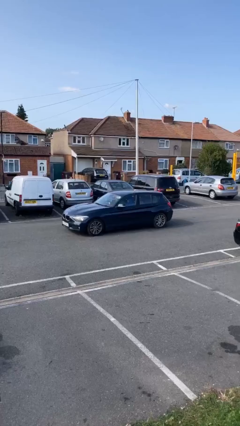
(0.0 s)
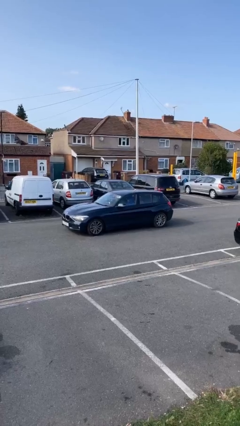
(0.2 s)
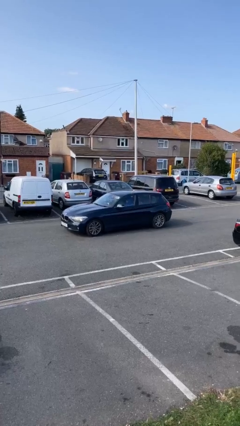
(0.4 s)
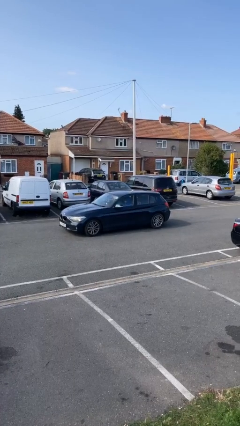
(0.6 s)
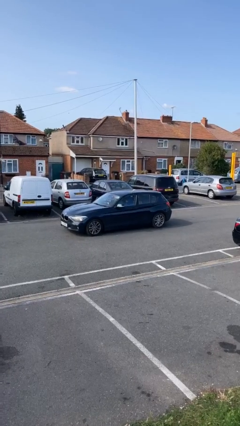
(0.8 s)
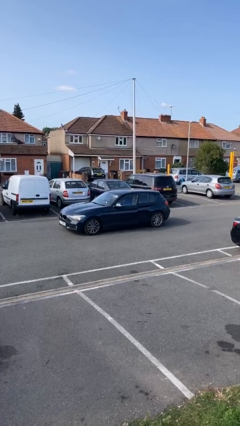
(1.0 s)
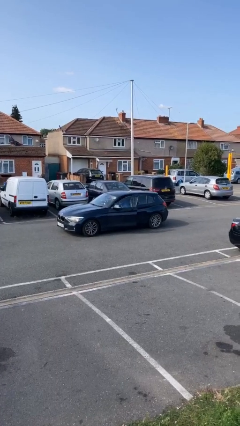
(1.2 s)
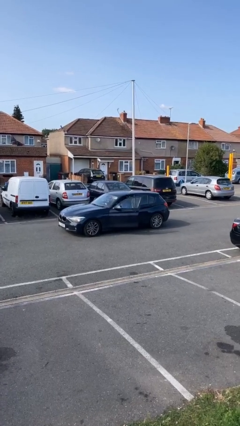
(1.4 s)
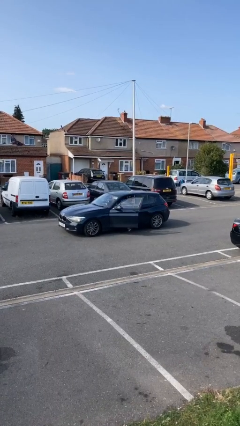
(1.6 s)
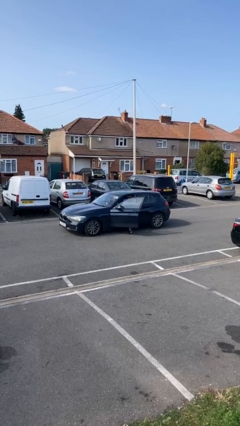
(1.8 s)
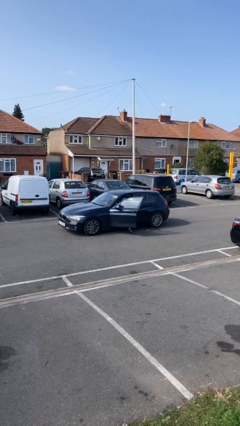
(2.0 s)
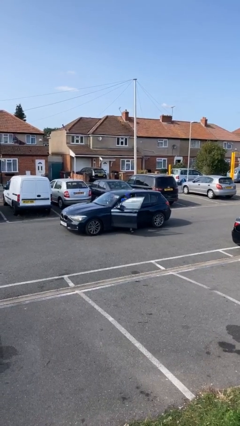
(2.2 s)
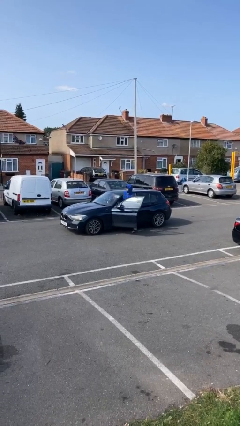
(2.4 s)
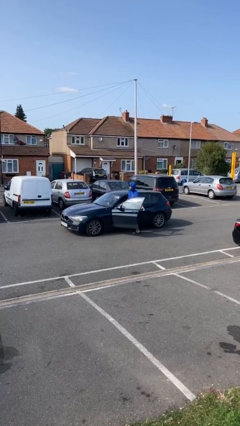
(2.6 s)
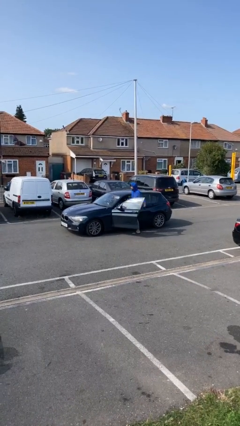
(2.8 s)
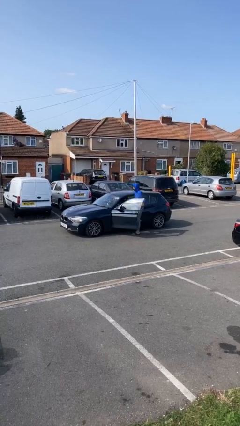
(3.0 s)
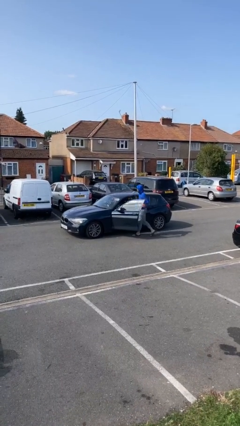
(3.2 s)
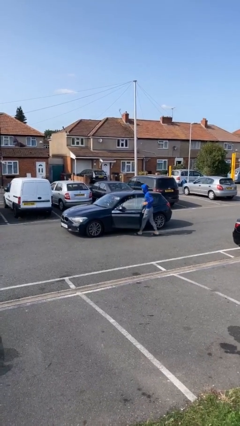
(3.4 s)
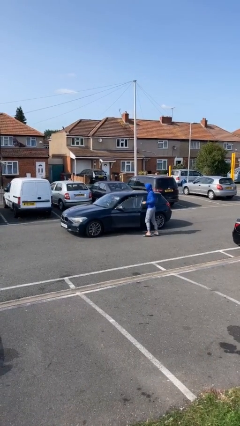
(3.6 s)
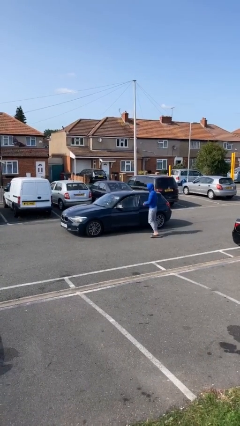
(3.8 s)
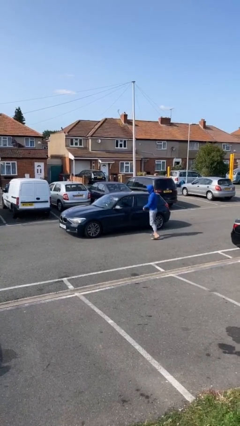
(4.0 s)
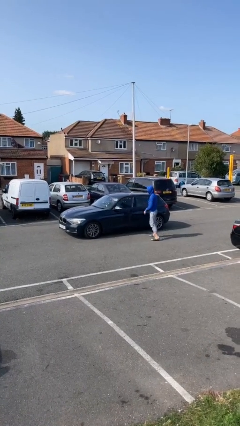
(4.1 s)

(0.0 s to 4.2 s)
car drops off person

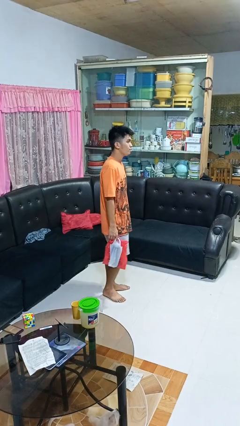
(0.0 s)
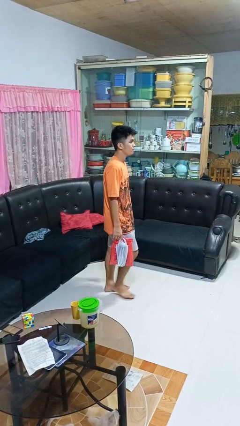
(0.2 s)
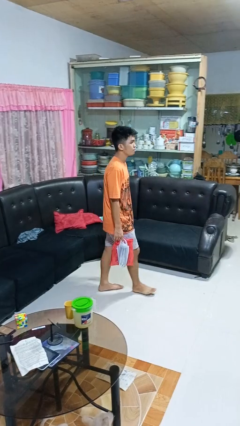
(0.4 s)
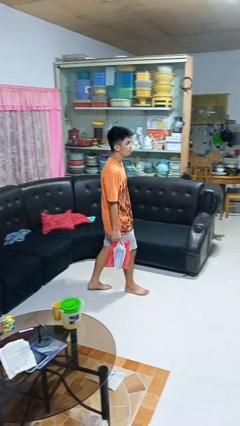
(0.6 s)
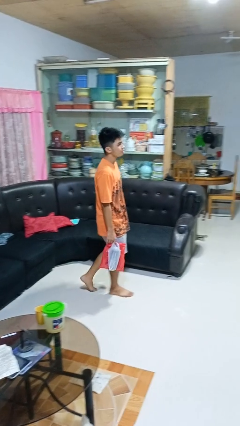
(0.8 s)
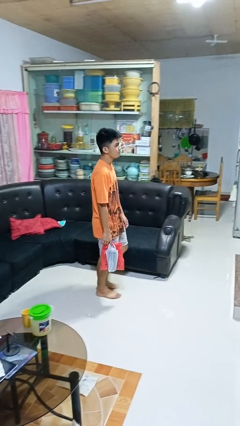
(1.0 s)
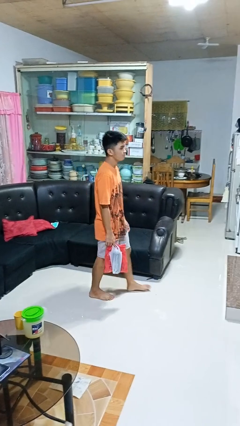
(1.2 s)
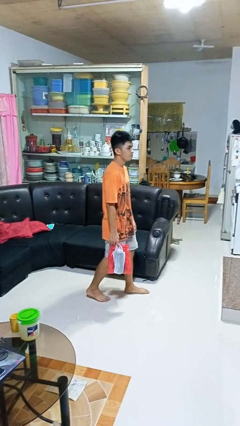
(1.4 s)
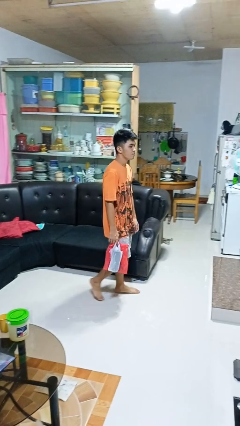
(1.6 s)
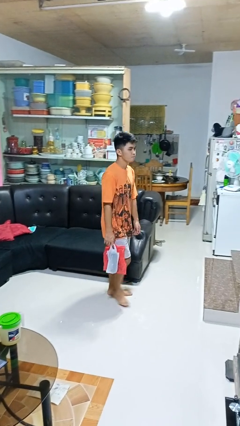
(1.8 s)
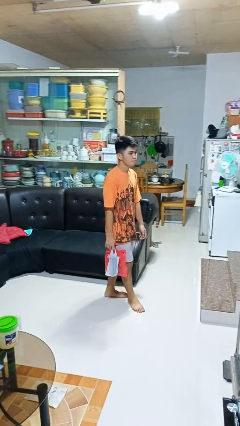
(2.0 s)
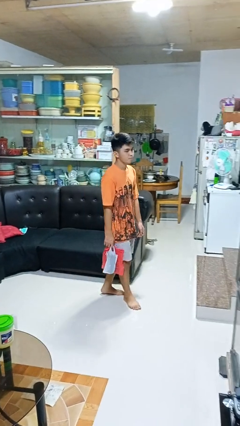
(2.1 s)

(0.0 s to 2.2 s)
person carries groceries

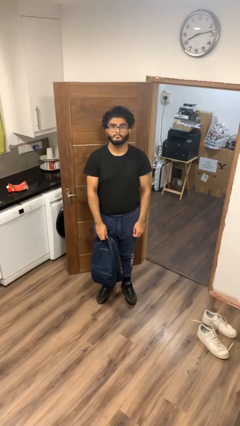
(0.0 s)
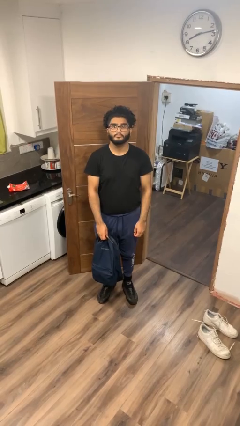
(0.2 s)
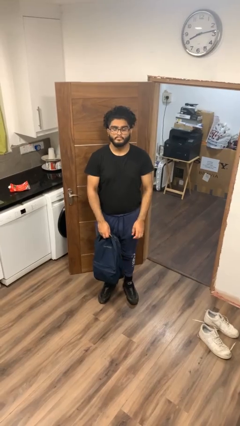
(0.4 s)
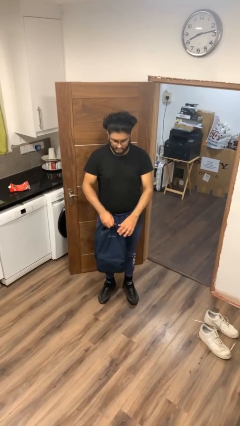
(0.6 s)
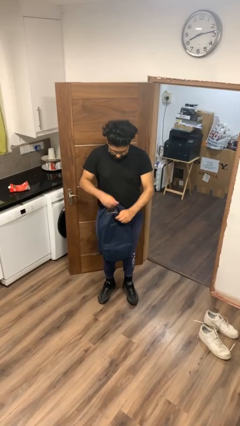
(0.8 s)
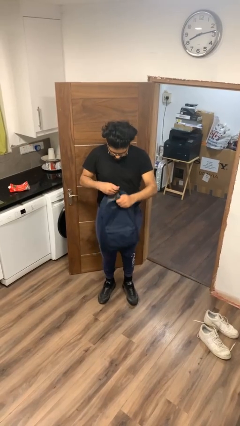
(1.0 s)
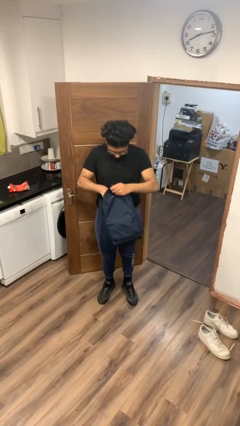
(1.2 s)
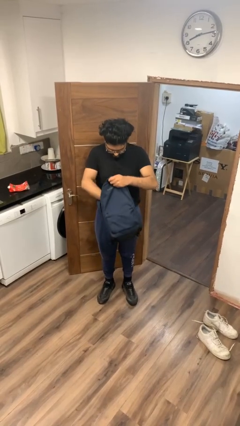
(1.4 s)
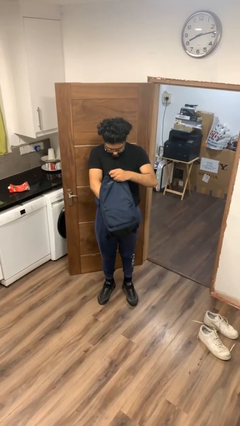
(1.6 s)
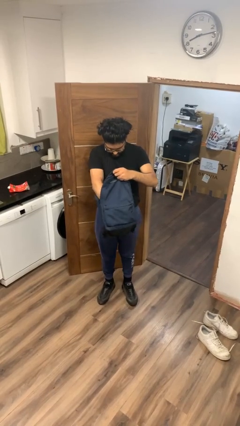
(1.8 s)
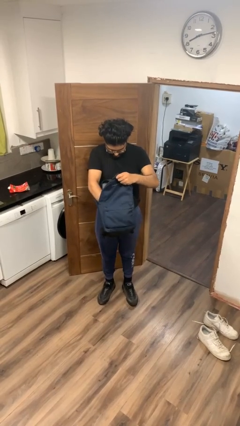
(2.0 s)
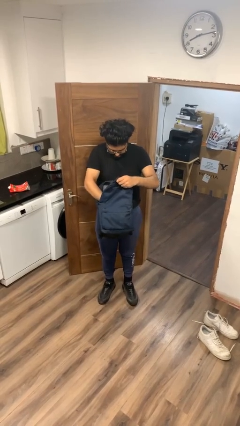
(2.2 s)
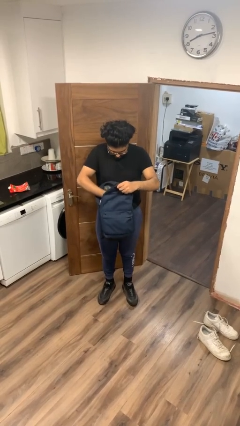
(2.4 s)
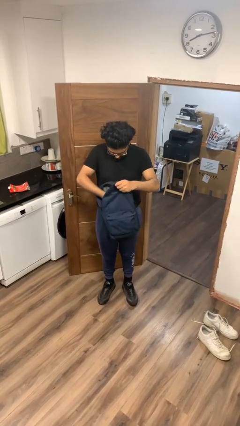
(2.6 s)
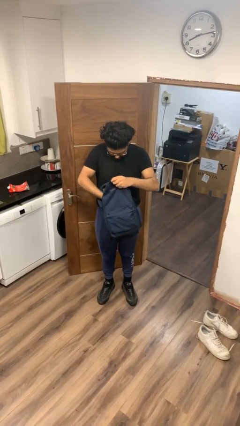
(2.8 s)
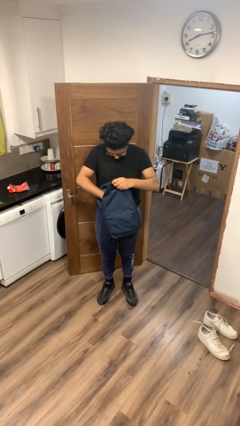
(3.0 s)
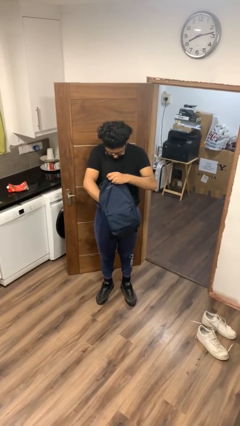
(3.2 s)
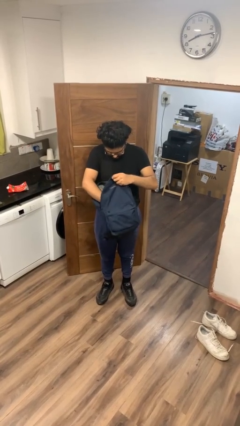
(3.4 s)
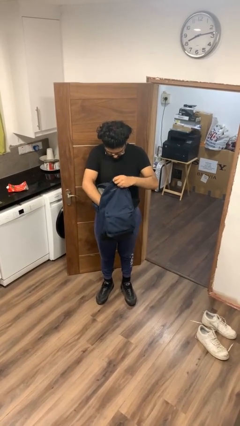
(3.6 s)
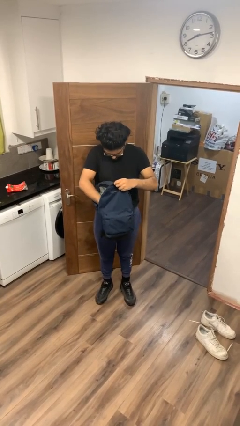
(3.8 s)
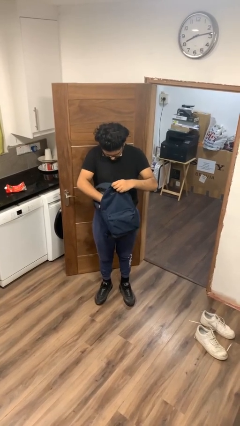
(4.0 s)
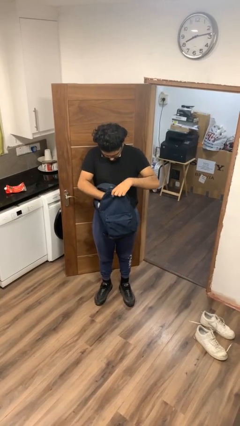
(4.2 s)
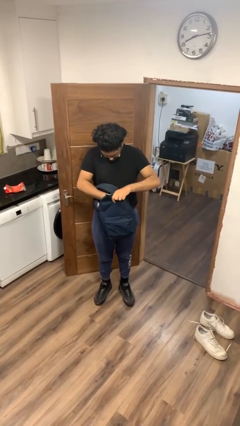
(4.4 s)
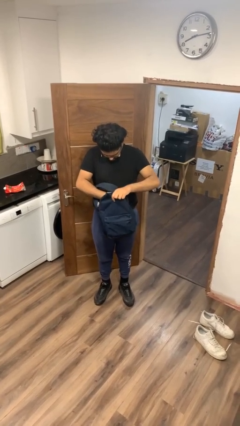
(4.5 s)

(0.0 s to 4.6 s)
person searches in backpack

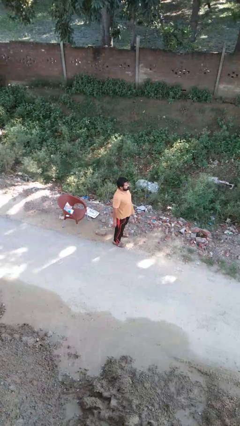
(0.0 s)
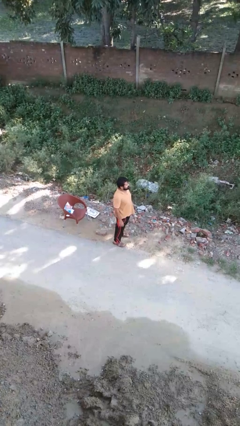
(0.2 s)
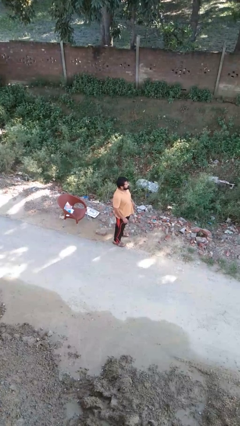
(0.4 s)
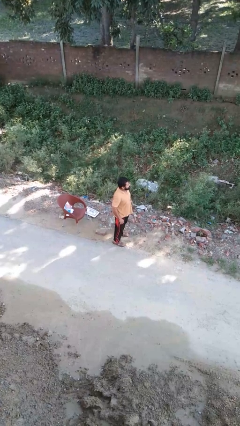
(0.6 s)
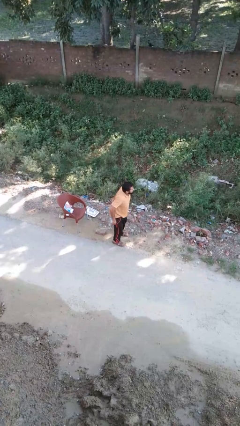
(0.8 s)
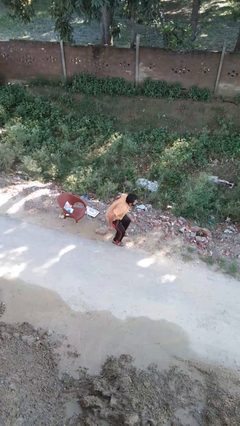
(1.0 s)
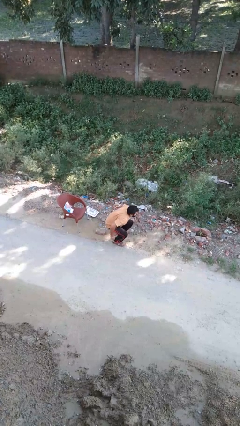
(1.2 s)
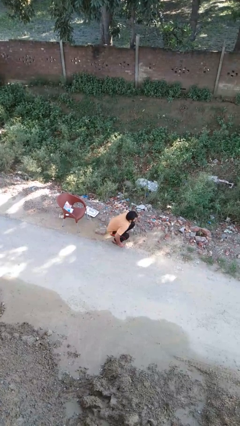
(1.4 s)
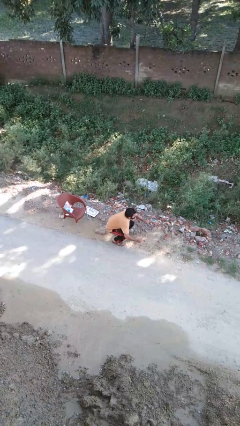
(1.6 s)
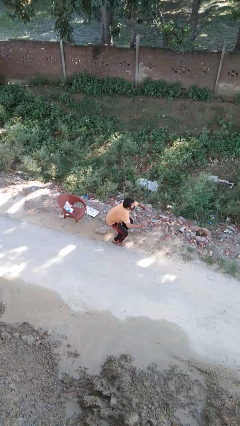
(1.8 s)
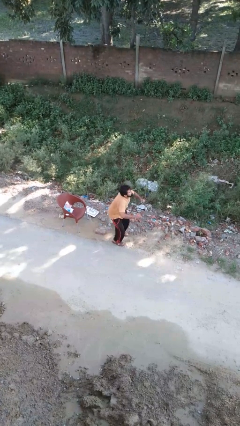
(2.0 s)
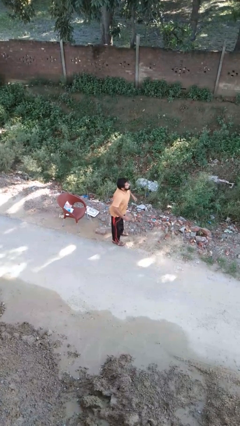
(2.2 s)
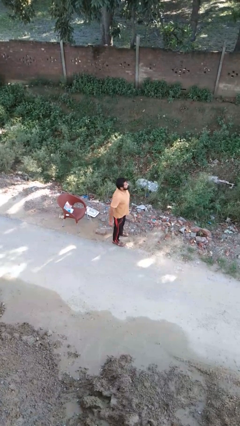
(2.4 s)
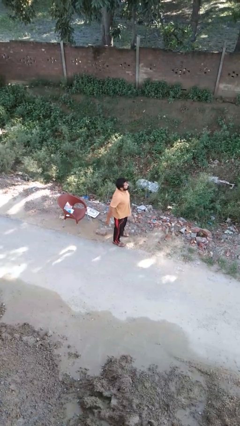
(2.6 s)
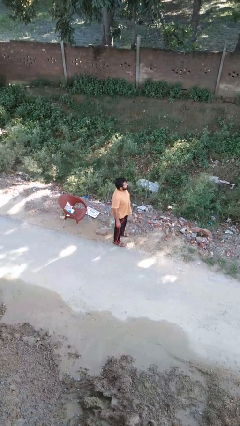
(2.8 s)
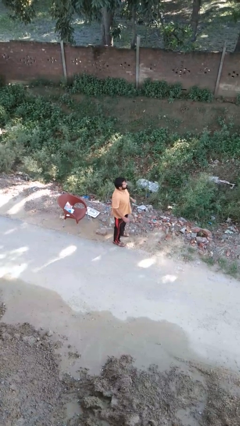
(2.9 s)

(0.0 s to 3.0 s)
person exercises with situp

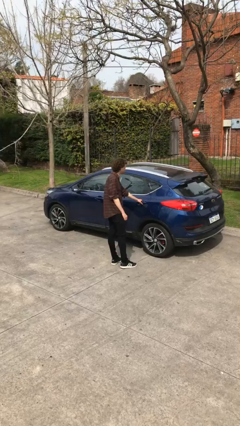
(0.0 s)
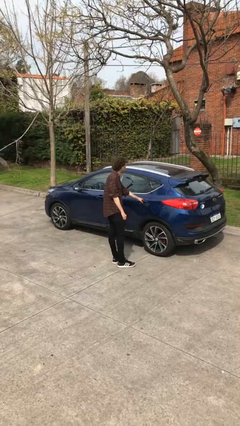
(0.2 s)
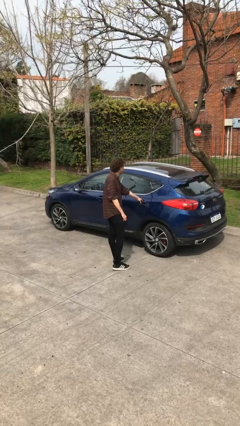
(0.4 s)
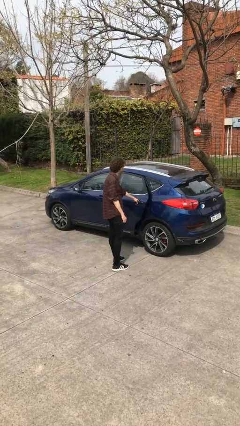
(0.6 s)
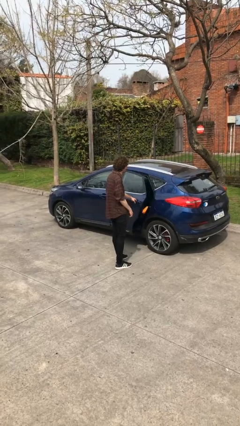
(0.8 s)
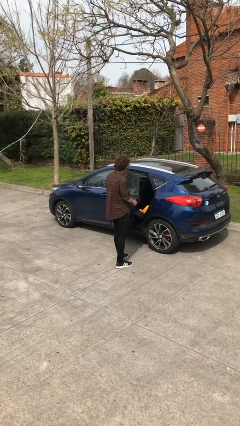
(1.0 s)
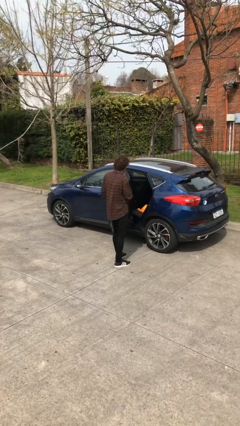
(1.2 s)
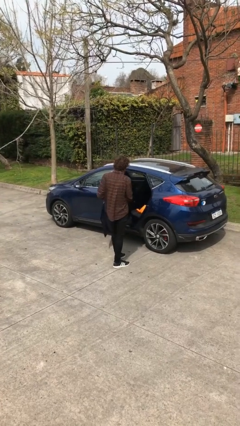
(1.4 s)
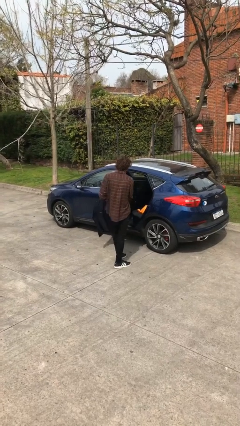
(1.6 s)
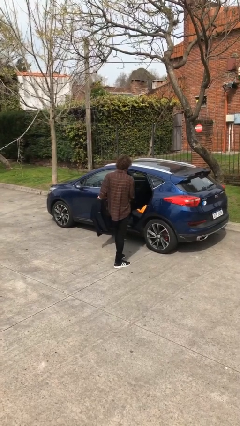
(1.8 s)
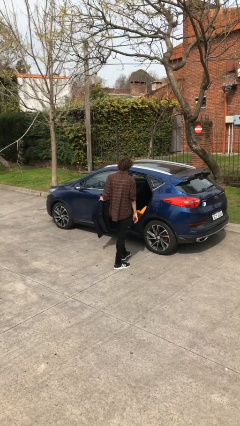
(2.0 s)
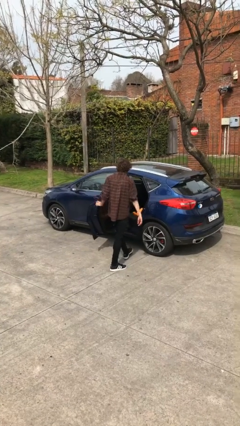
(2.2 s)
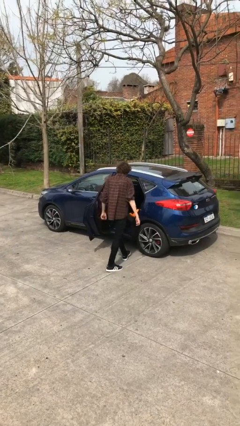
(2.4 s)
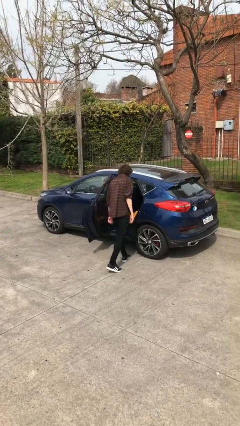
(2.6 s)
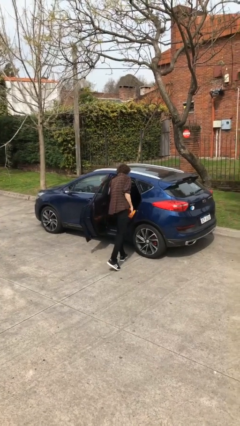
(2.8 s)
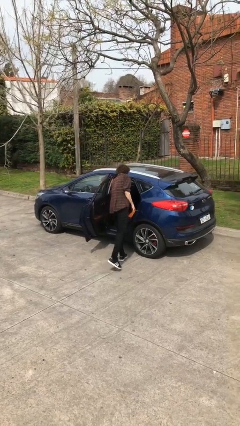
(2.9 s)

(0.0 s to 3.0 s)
person opens car door

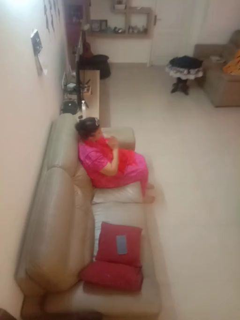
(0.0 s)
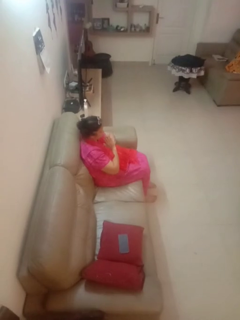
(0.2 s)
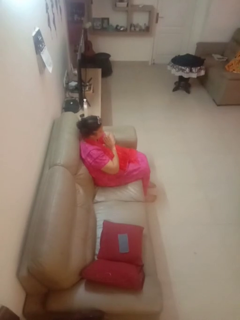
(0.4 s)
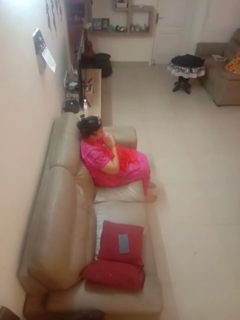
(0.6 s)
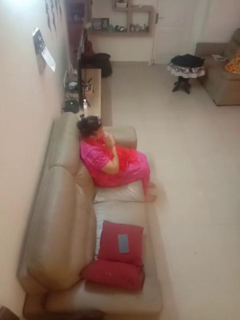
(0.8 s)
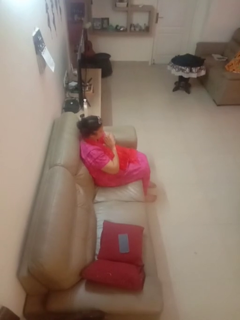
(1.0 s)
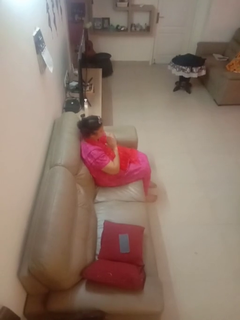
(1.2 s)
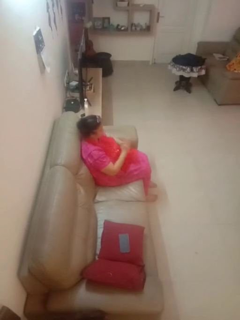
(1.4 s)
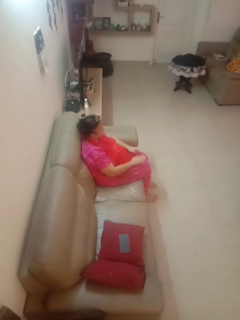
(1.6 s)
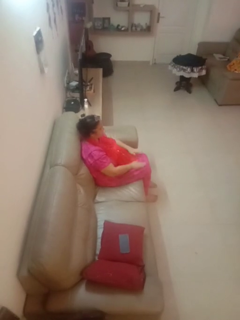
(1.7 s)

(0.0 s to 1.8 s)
person prays
